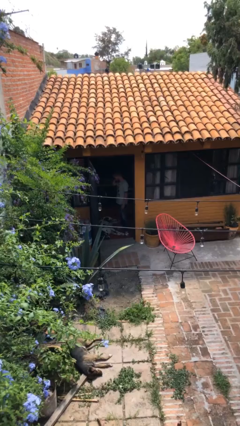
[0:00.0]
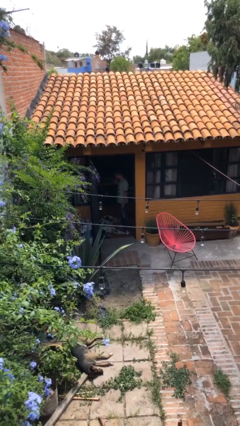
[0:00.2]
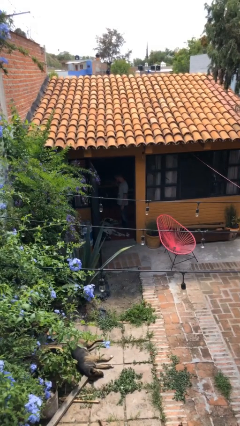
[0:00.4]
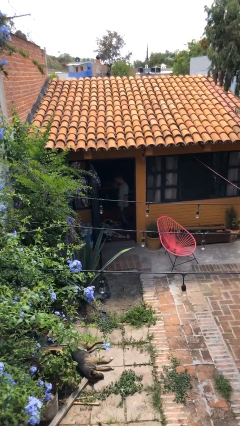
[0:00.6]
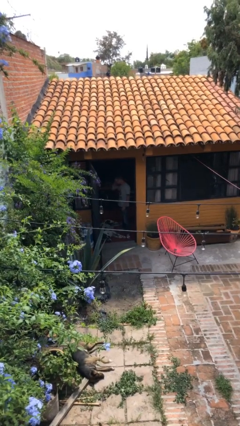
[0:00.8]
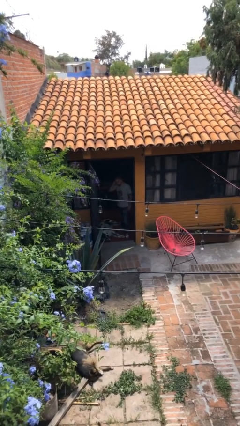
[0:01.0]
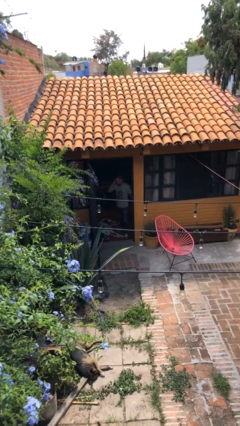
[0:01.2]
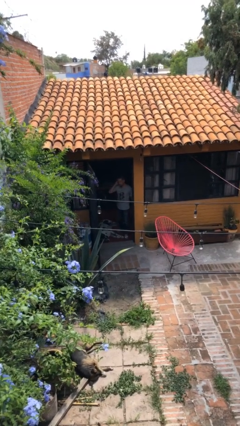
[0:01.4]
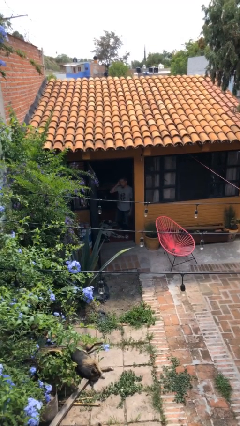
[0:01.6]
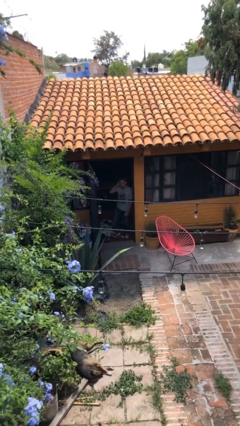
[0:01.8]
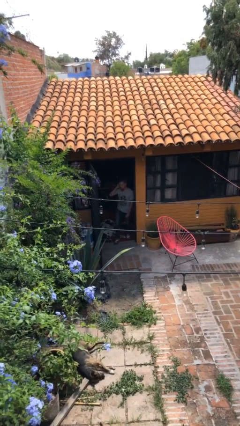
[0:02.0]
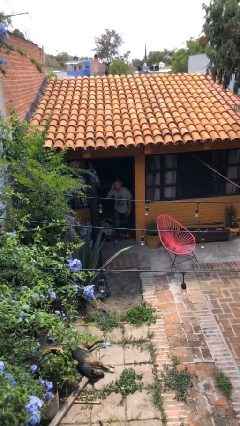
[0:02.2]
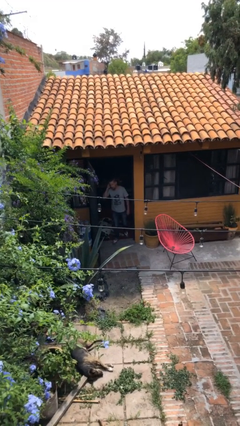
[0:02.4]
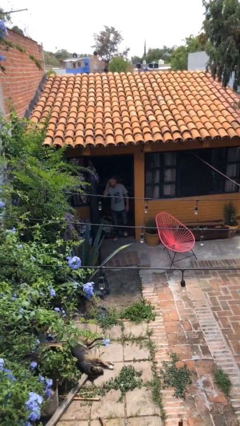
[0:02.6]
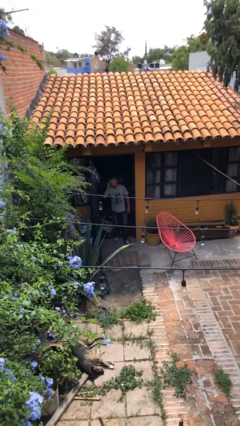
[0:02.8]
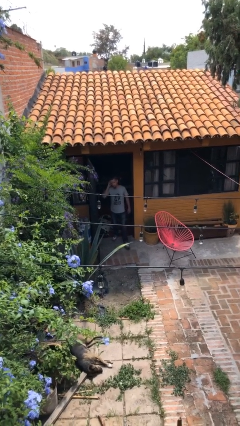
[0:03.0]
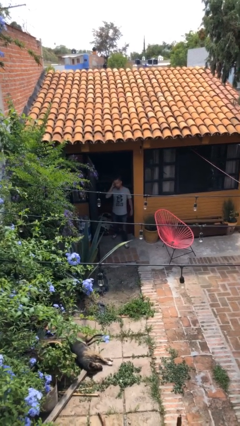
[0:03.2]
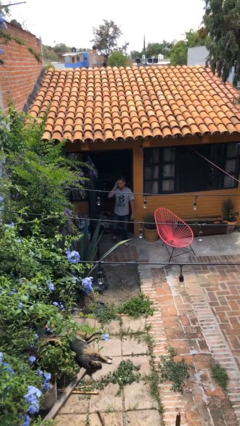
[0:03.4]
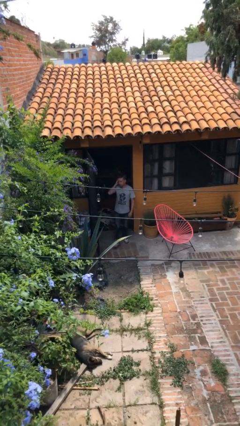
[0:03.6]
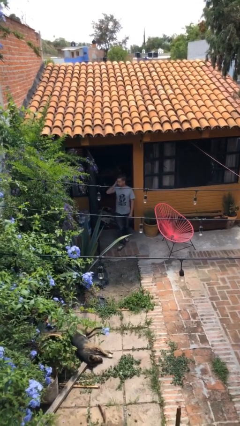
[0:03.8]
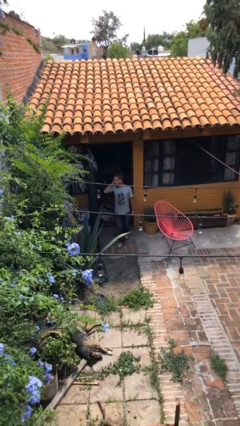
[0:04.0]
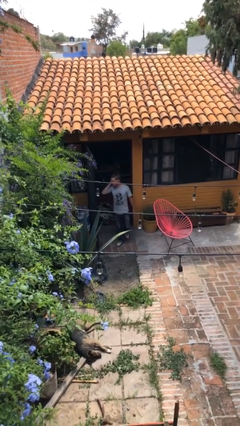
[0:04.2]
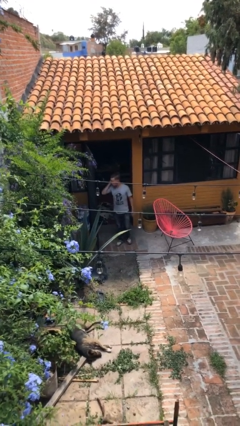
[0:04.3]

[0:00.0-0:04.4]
person enters scene through structure

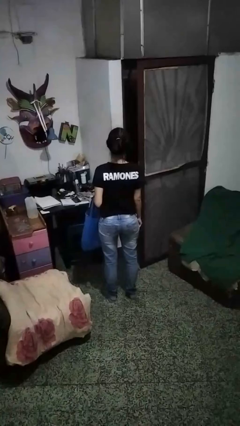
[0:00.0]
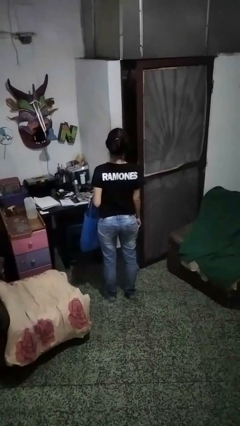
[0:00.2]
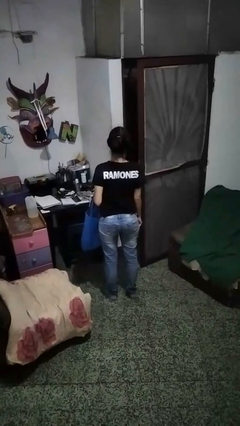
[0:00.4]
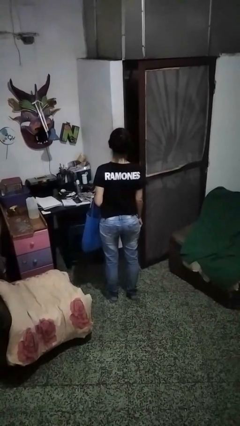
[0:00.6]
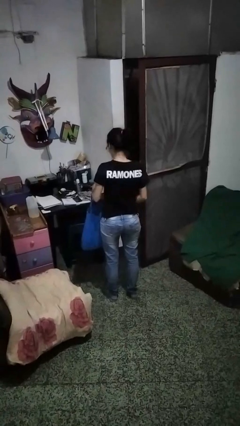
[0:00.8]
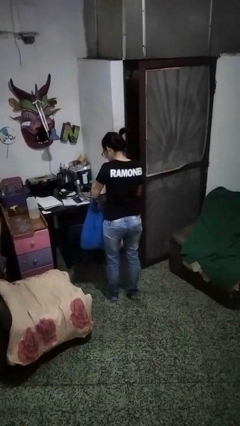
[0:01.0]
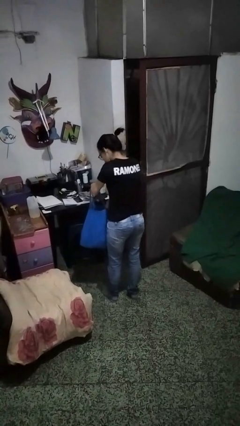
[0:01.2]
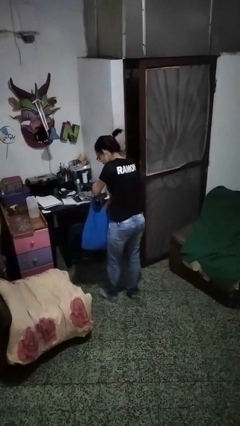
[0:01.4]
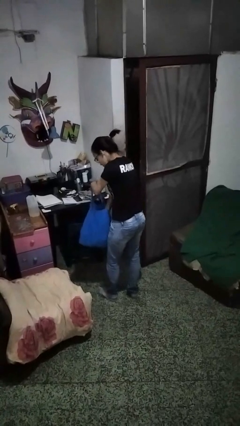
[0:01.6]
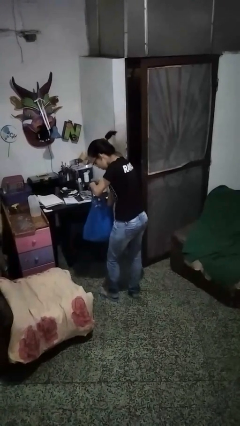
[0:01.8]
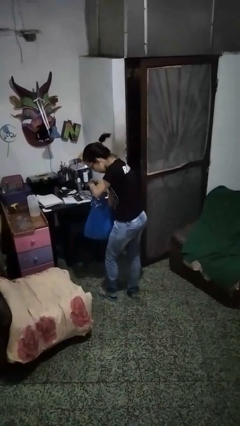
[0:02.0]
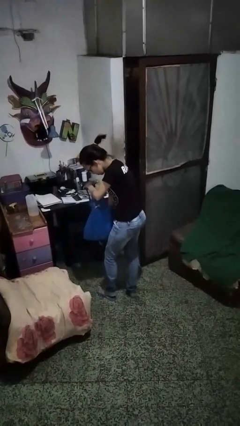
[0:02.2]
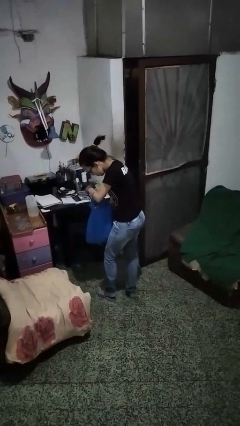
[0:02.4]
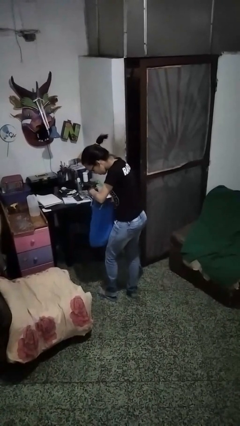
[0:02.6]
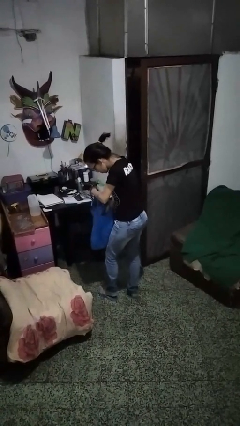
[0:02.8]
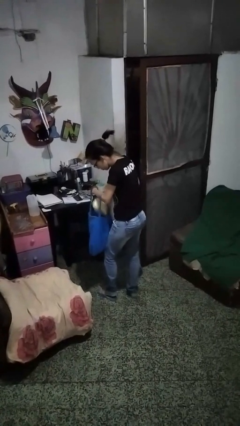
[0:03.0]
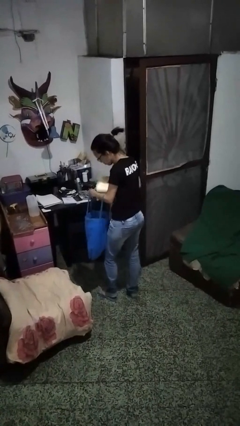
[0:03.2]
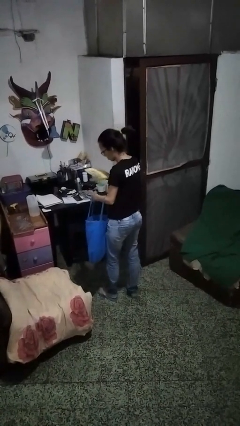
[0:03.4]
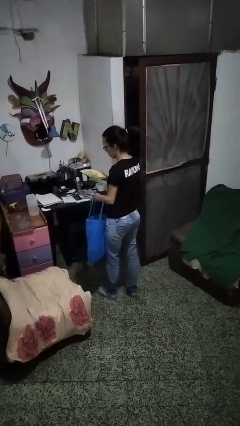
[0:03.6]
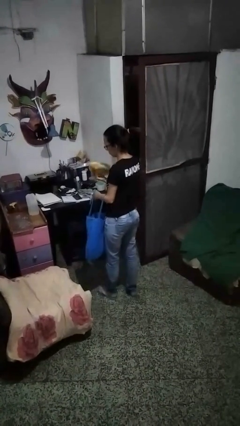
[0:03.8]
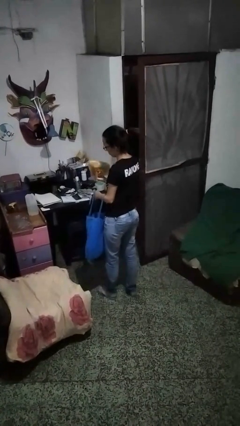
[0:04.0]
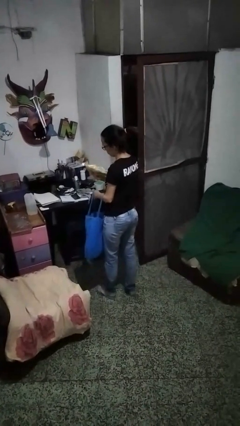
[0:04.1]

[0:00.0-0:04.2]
person takes object from bag

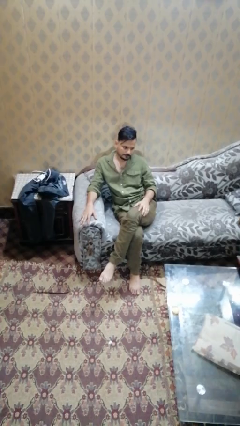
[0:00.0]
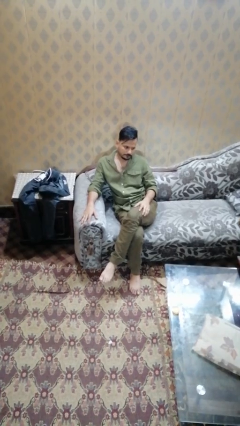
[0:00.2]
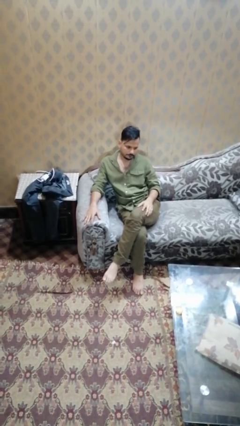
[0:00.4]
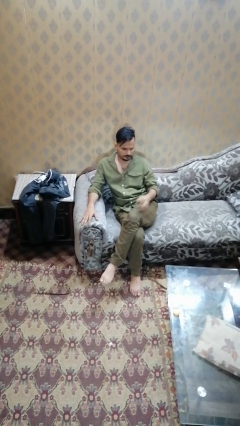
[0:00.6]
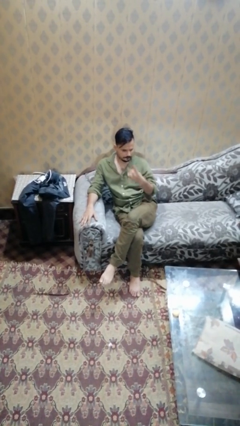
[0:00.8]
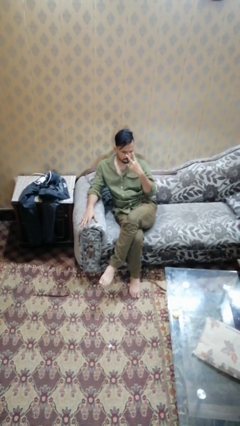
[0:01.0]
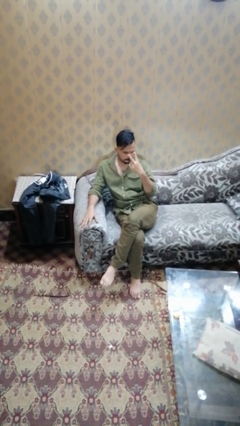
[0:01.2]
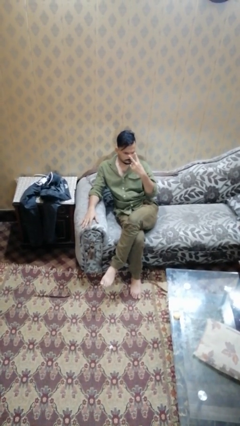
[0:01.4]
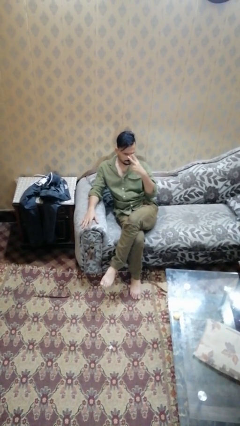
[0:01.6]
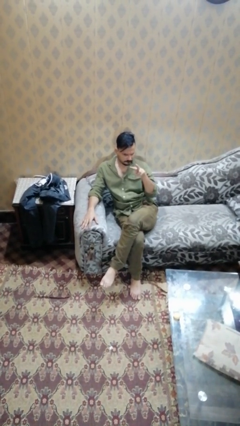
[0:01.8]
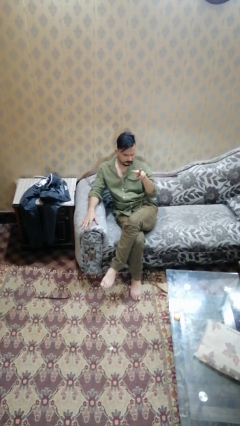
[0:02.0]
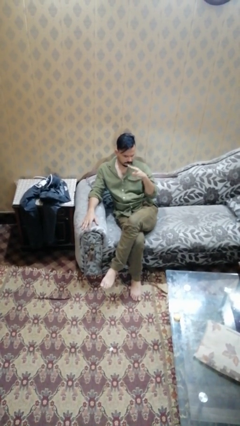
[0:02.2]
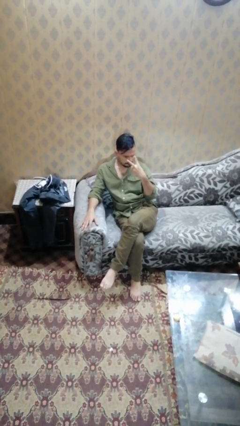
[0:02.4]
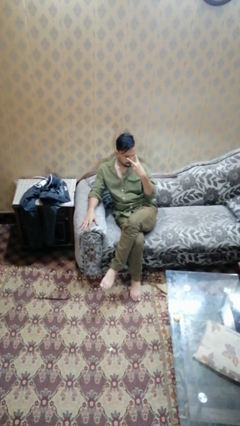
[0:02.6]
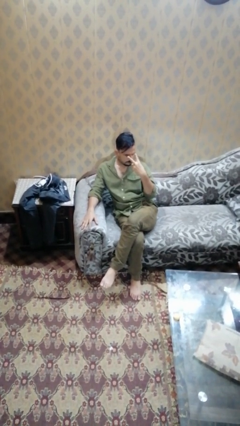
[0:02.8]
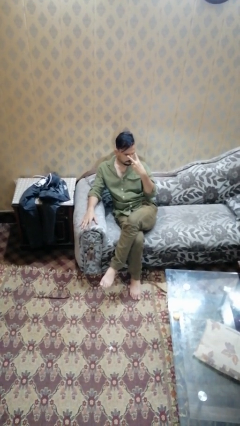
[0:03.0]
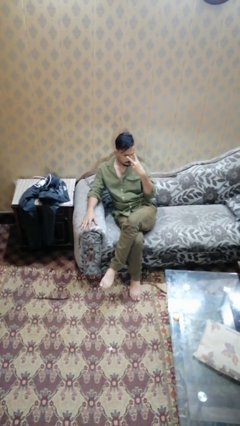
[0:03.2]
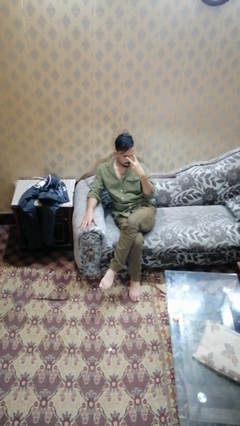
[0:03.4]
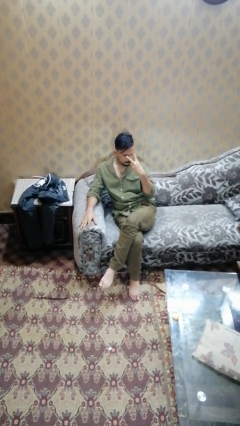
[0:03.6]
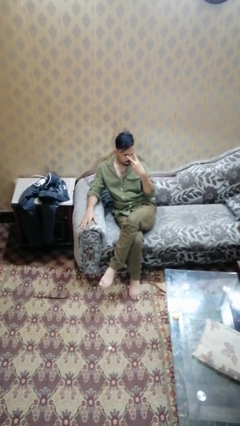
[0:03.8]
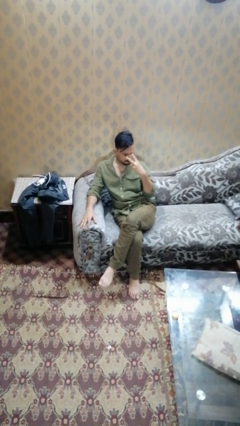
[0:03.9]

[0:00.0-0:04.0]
person gestures watch closely

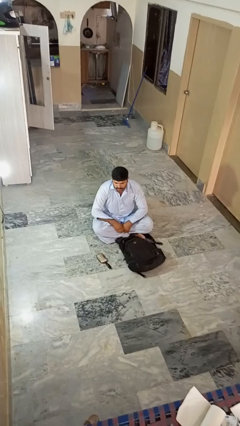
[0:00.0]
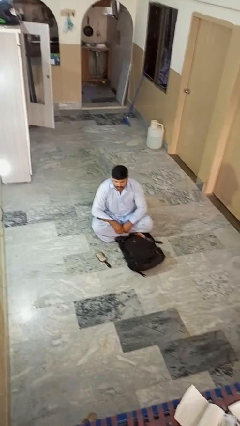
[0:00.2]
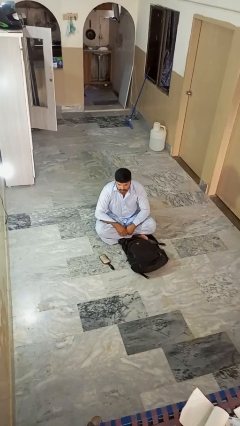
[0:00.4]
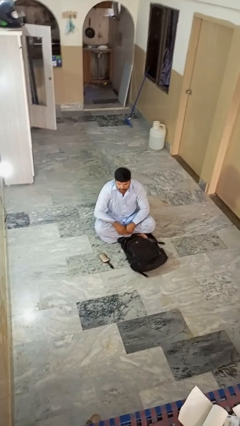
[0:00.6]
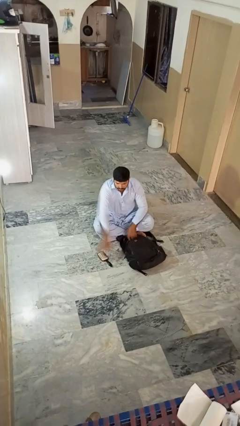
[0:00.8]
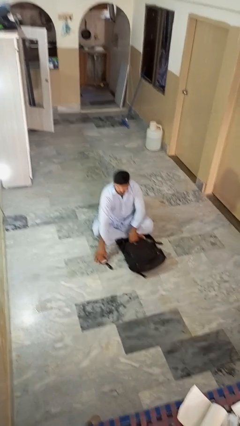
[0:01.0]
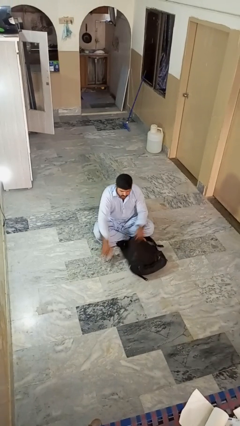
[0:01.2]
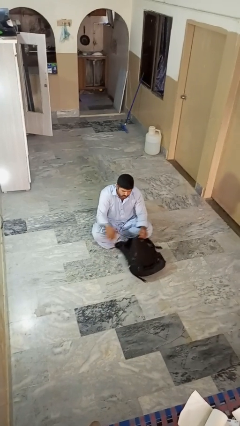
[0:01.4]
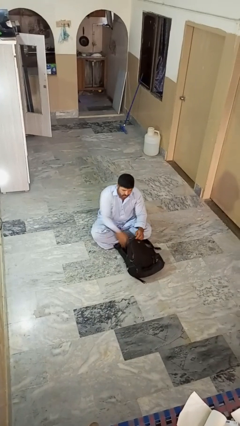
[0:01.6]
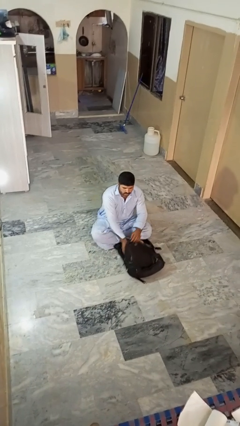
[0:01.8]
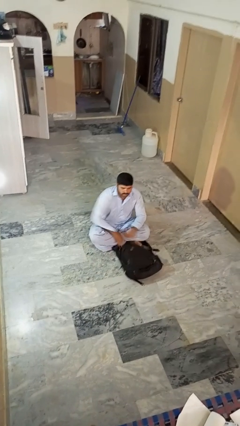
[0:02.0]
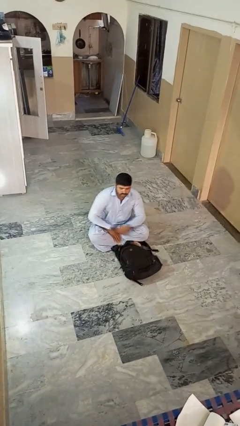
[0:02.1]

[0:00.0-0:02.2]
person puts object into bag

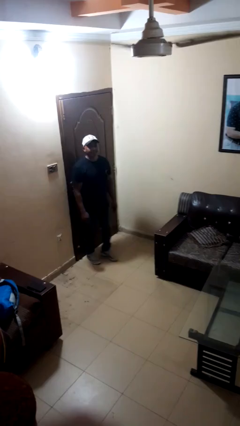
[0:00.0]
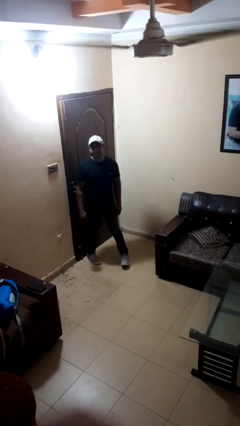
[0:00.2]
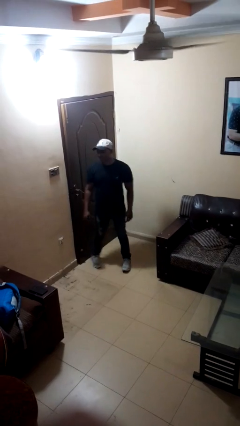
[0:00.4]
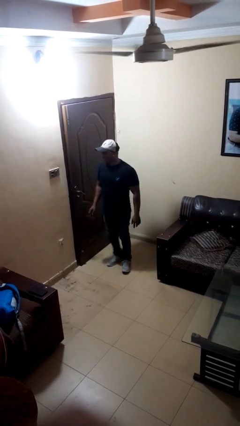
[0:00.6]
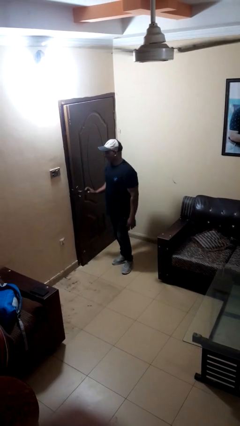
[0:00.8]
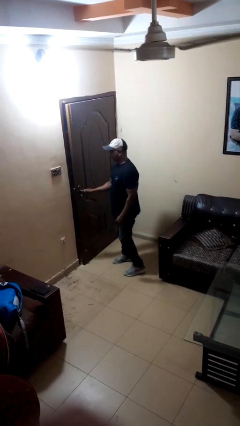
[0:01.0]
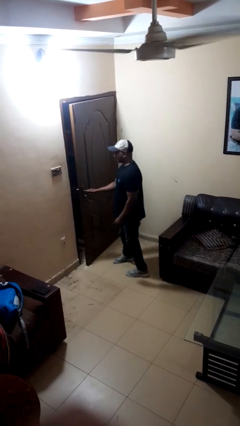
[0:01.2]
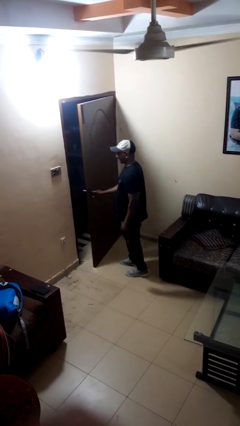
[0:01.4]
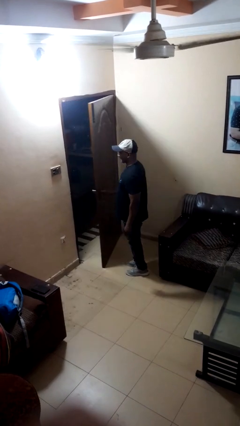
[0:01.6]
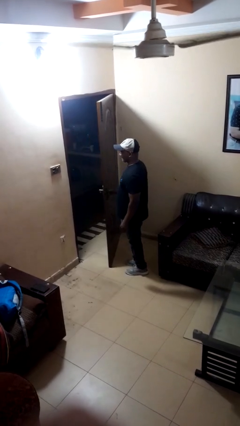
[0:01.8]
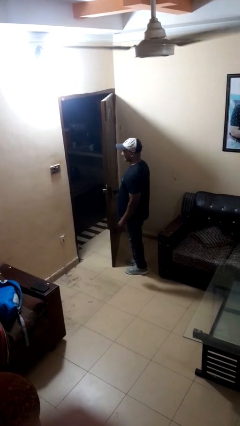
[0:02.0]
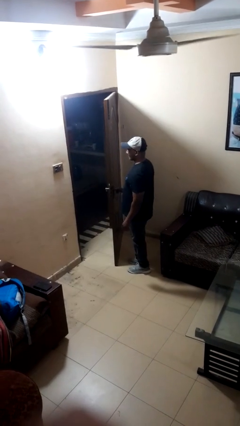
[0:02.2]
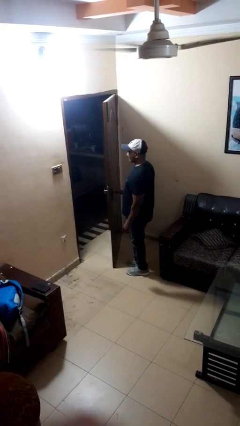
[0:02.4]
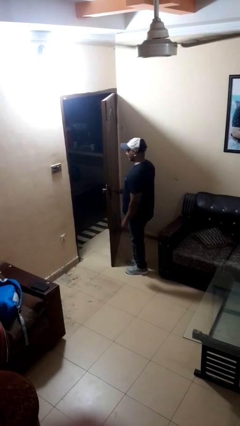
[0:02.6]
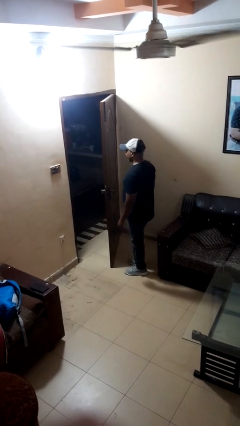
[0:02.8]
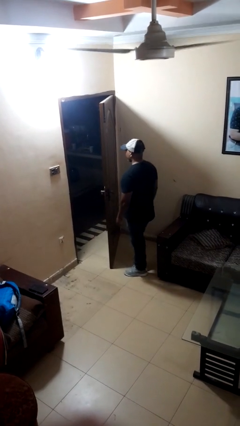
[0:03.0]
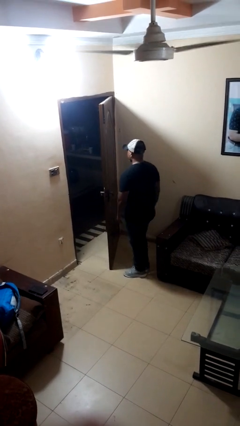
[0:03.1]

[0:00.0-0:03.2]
person opens facility door
